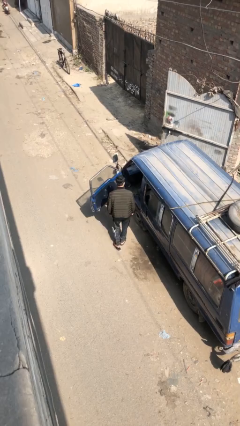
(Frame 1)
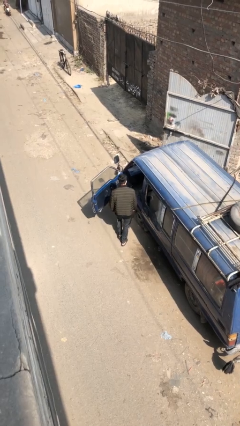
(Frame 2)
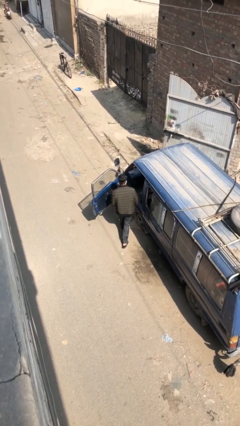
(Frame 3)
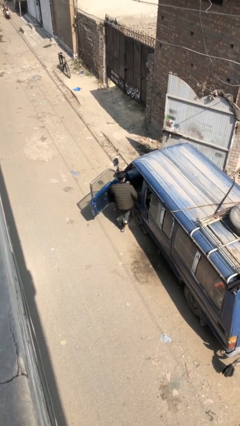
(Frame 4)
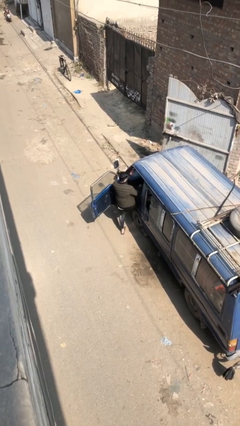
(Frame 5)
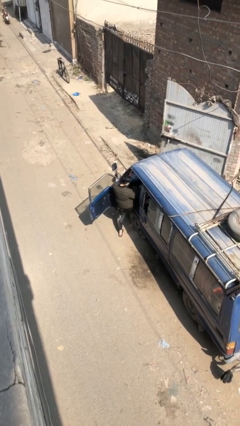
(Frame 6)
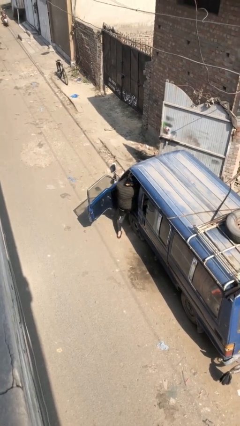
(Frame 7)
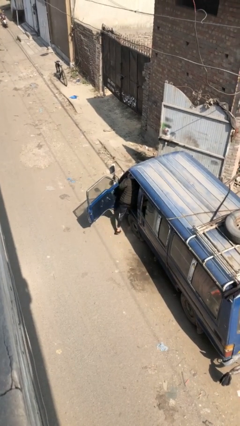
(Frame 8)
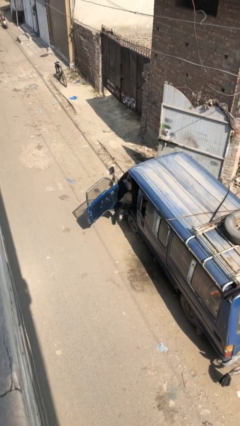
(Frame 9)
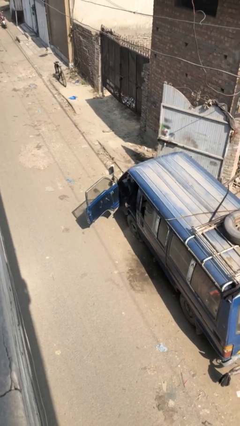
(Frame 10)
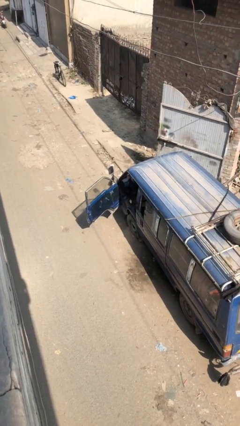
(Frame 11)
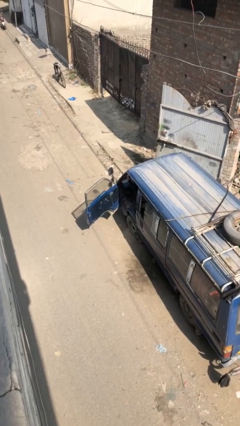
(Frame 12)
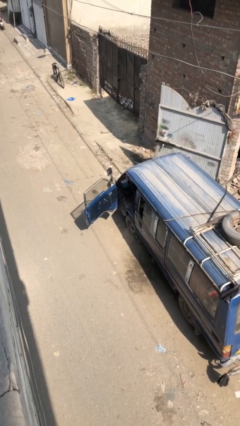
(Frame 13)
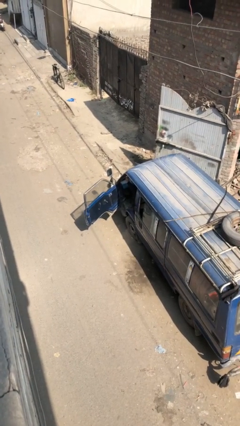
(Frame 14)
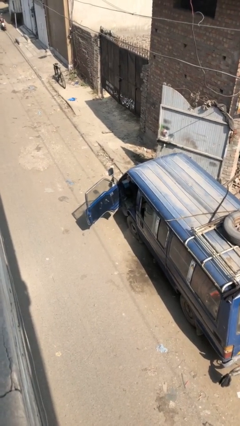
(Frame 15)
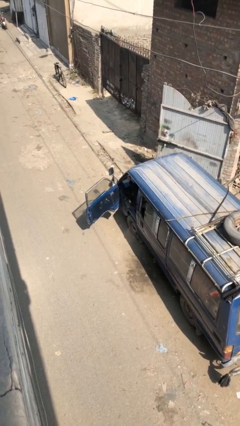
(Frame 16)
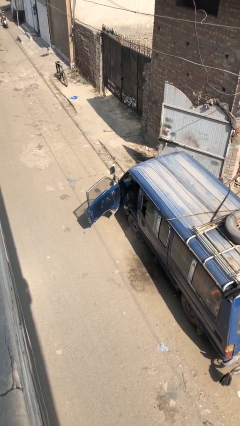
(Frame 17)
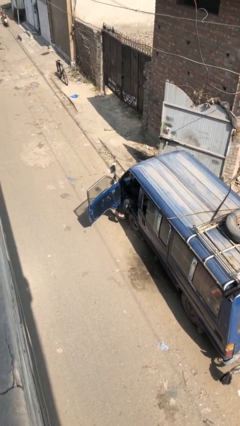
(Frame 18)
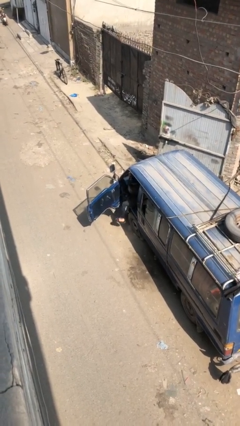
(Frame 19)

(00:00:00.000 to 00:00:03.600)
person enters car

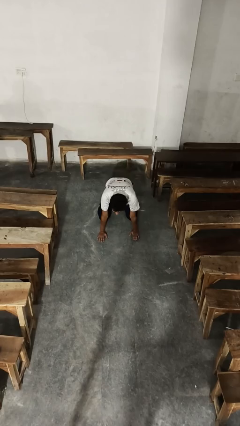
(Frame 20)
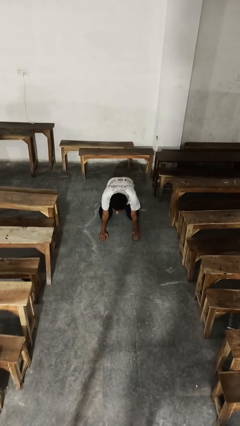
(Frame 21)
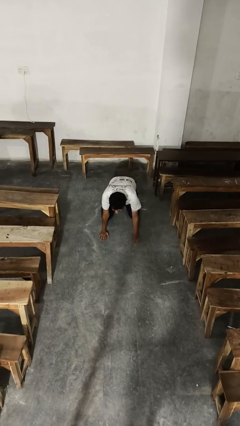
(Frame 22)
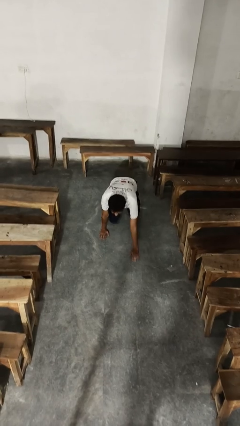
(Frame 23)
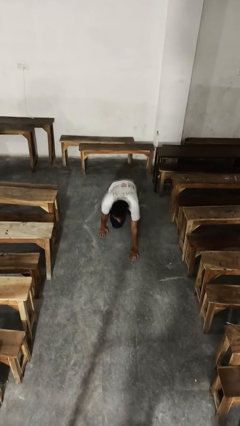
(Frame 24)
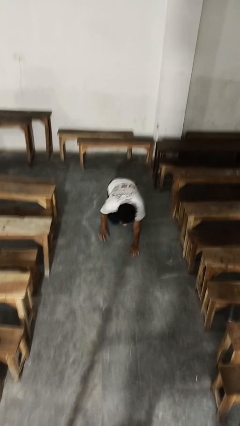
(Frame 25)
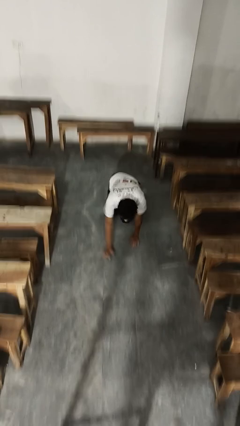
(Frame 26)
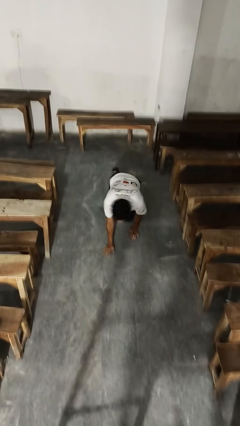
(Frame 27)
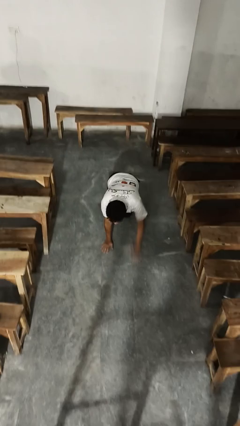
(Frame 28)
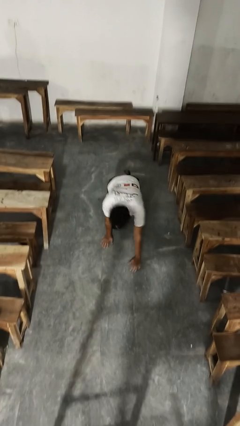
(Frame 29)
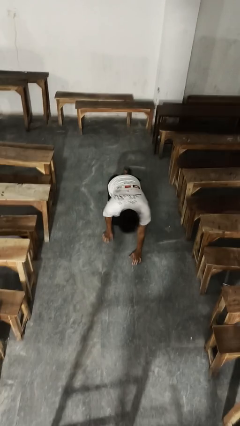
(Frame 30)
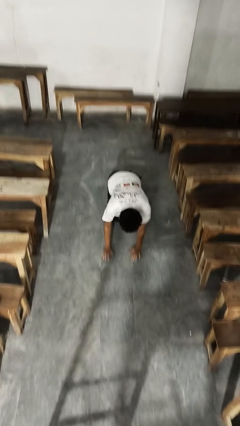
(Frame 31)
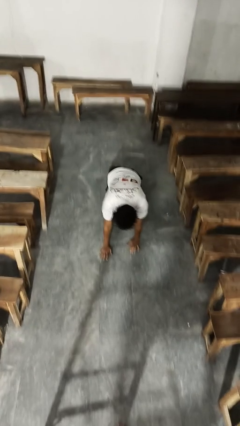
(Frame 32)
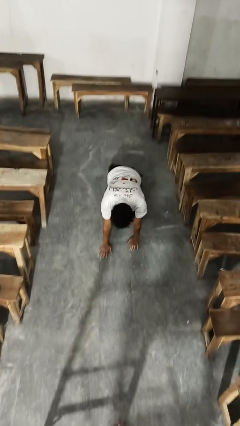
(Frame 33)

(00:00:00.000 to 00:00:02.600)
person crawls

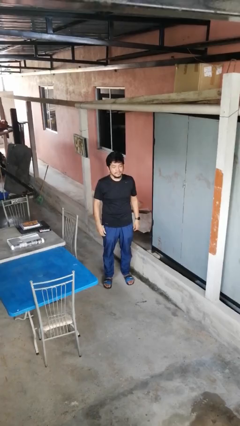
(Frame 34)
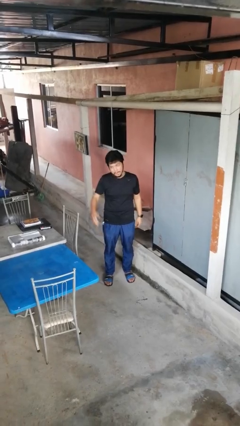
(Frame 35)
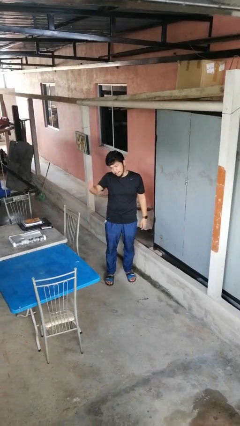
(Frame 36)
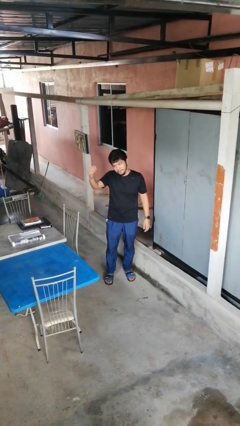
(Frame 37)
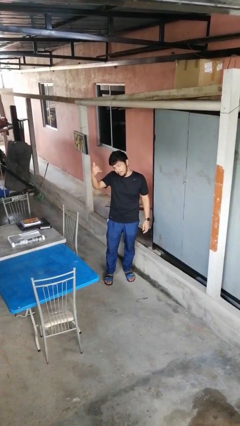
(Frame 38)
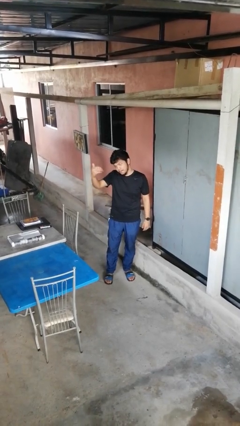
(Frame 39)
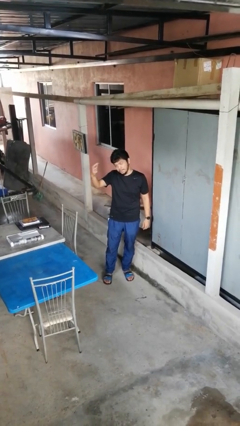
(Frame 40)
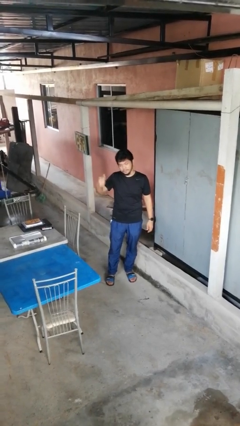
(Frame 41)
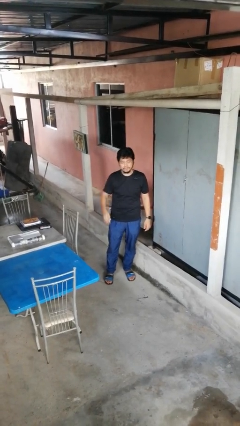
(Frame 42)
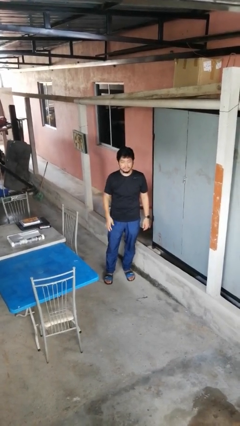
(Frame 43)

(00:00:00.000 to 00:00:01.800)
person gestures come here

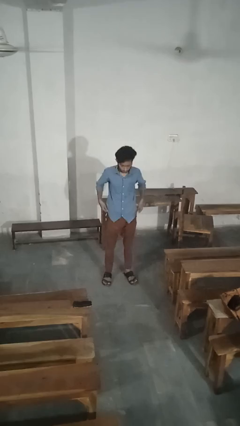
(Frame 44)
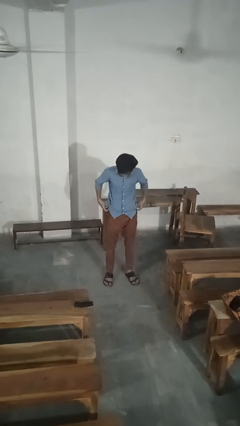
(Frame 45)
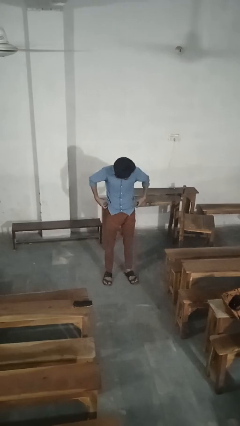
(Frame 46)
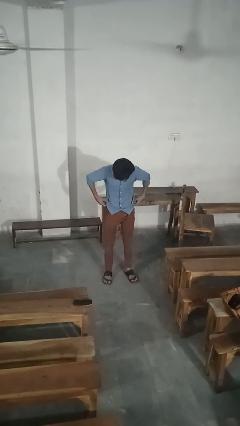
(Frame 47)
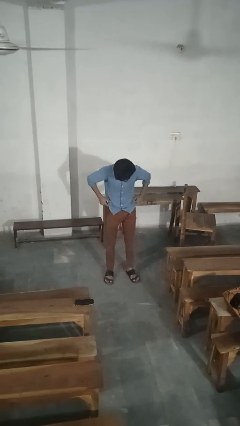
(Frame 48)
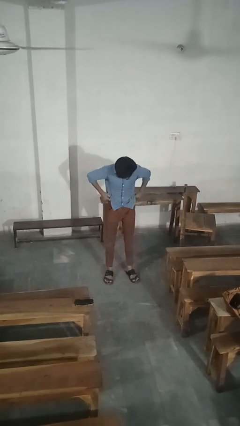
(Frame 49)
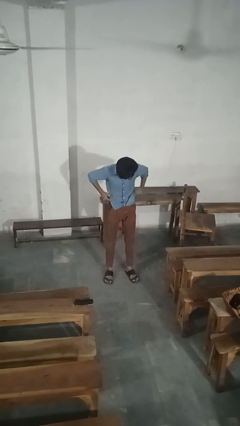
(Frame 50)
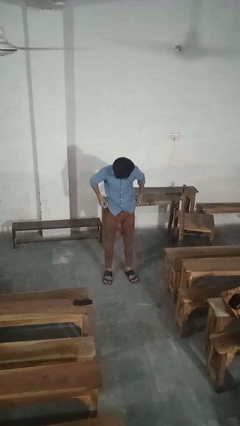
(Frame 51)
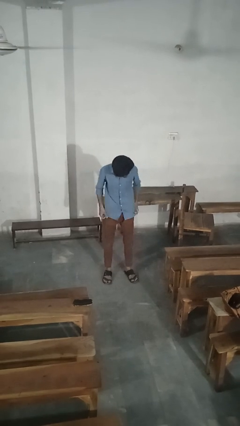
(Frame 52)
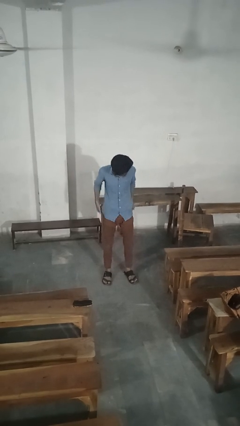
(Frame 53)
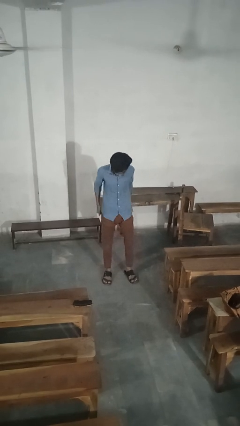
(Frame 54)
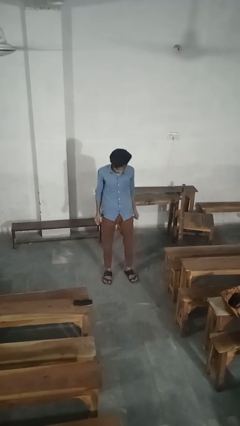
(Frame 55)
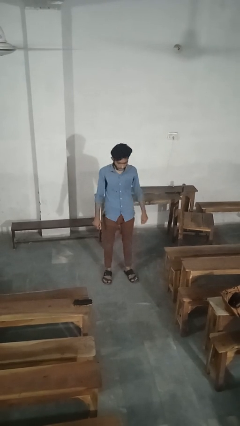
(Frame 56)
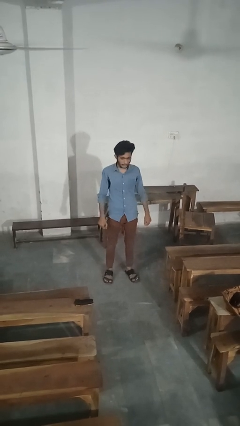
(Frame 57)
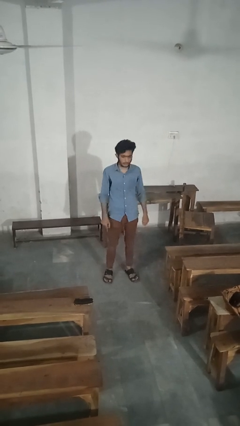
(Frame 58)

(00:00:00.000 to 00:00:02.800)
person hikes up pants

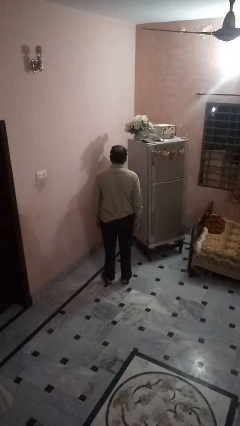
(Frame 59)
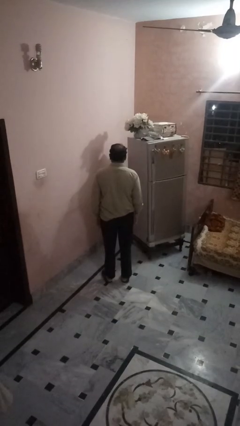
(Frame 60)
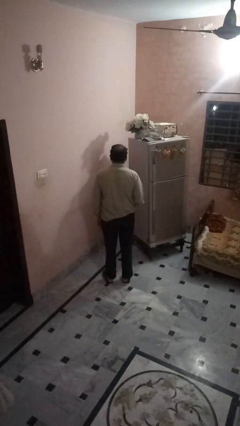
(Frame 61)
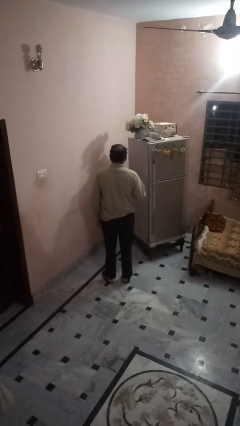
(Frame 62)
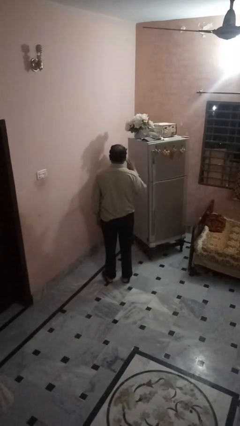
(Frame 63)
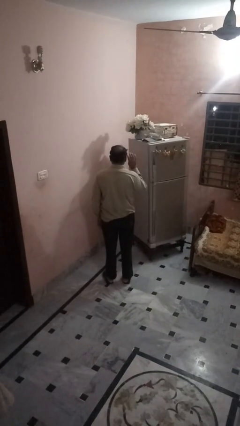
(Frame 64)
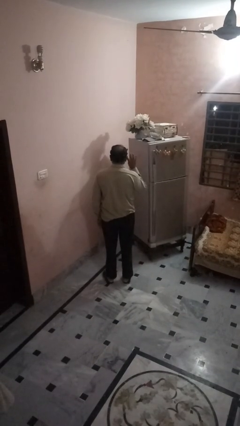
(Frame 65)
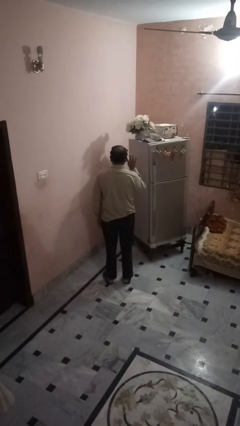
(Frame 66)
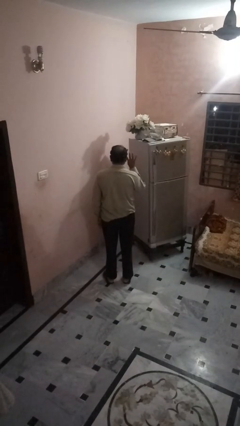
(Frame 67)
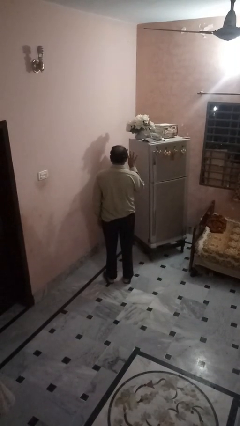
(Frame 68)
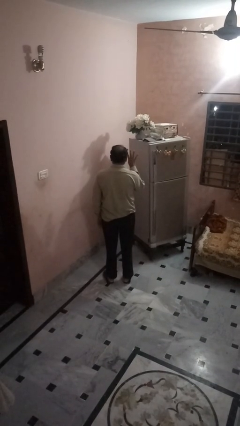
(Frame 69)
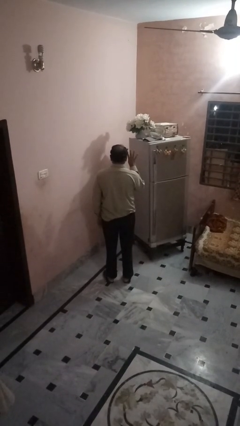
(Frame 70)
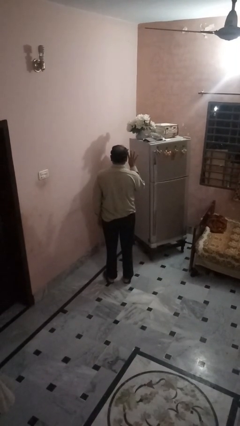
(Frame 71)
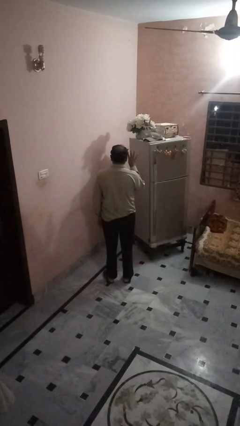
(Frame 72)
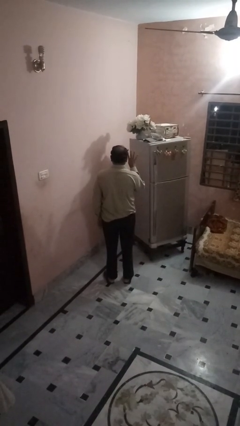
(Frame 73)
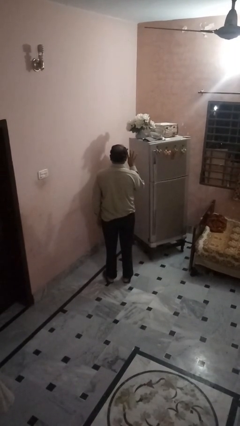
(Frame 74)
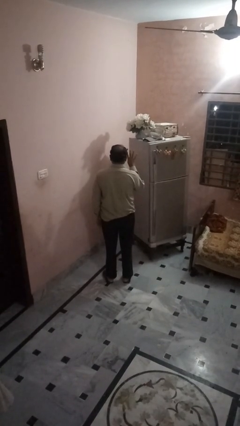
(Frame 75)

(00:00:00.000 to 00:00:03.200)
person gestures number four

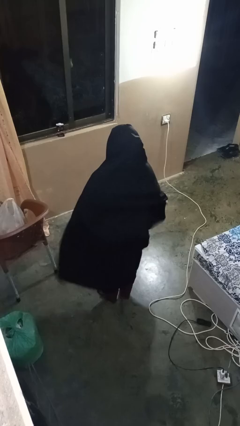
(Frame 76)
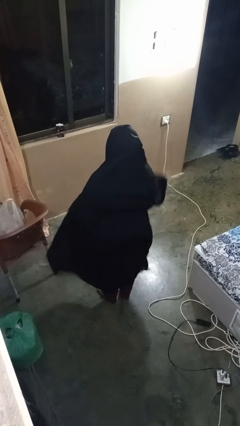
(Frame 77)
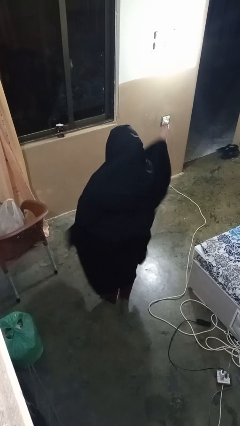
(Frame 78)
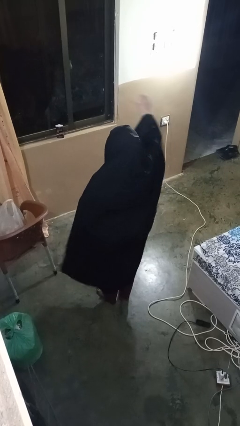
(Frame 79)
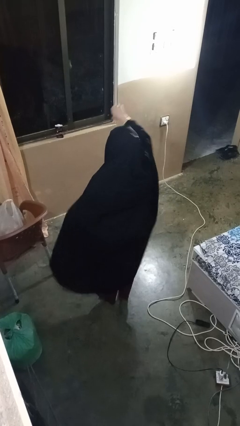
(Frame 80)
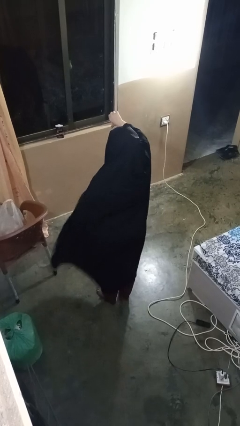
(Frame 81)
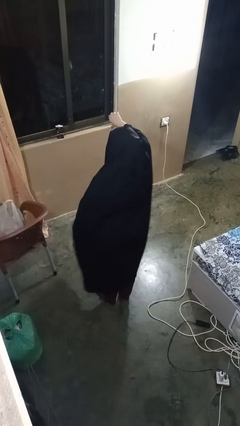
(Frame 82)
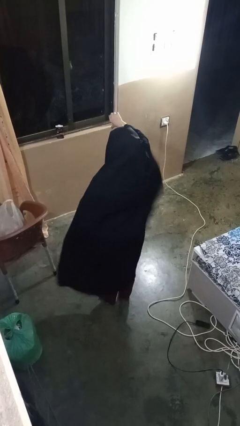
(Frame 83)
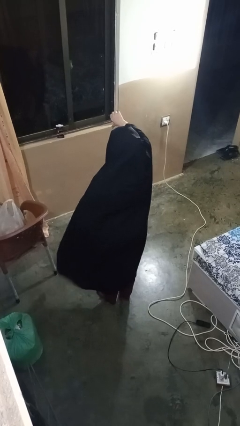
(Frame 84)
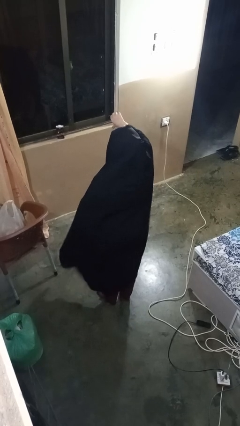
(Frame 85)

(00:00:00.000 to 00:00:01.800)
person gestures thumbs down

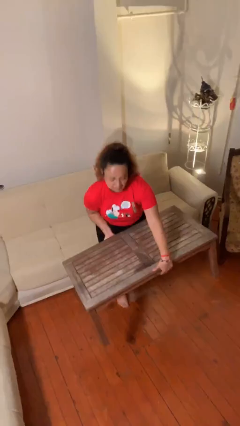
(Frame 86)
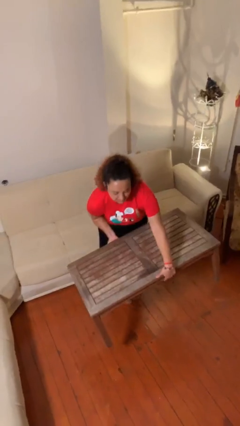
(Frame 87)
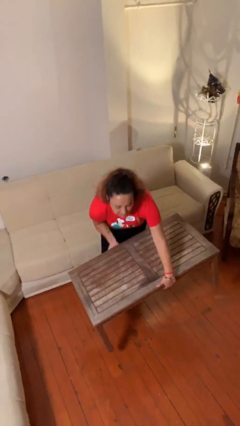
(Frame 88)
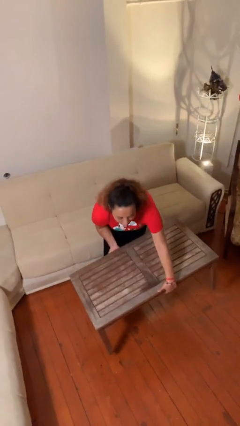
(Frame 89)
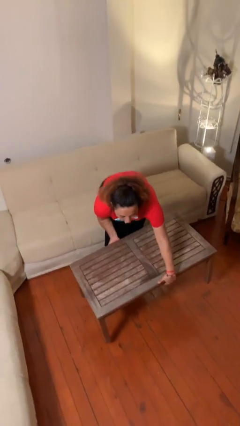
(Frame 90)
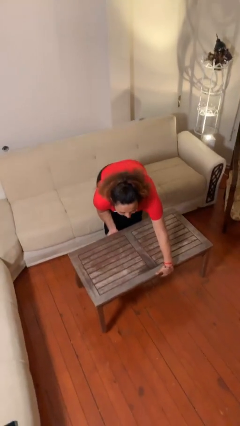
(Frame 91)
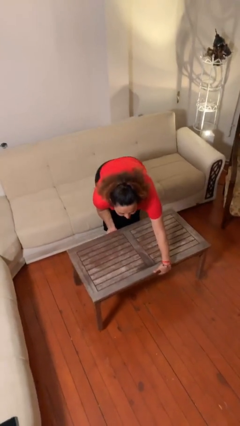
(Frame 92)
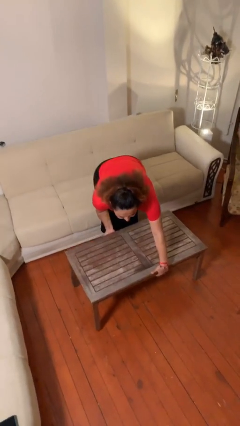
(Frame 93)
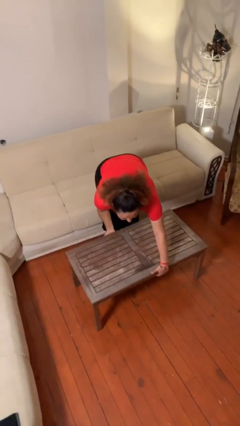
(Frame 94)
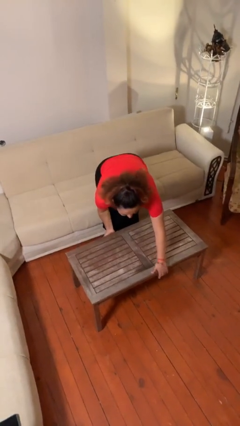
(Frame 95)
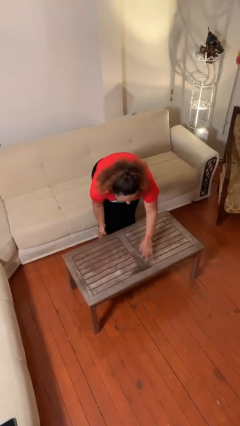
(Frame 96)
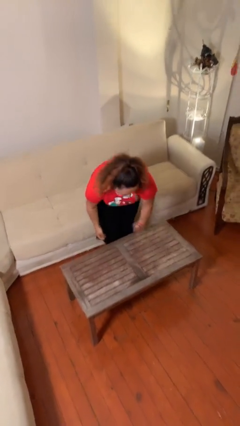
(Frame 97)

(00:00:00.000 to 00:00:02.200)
person puts down object on floor
